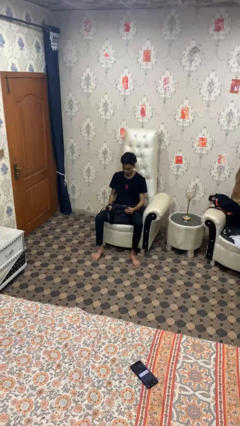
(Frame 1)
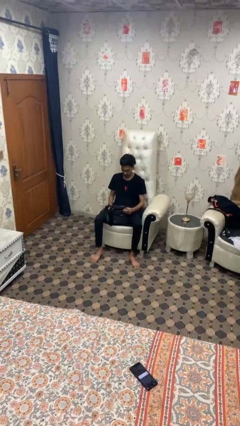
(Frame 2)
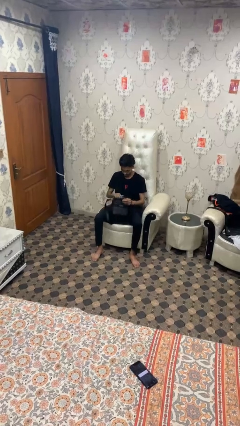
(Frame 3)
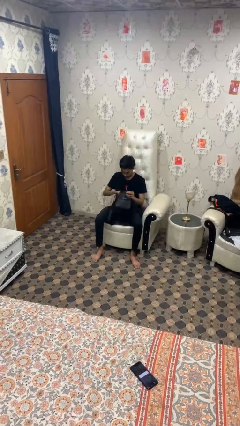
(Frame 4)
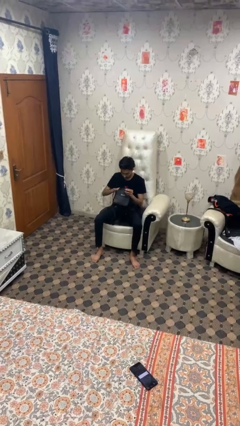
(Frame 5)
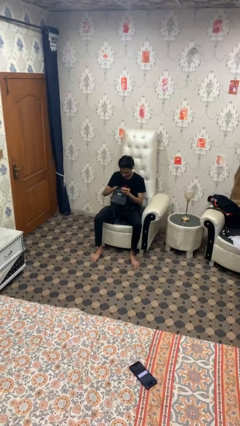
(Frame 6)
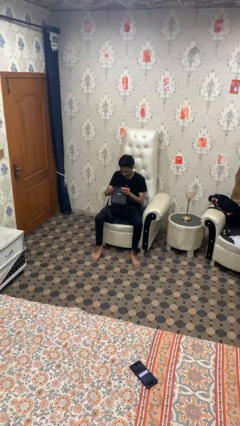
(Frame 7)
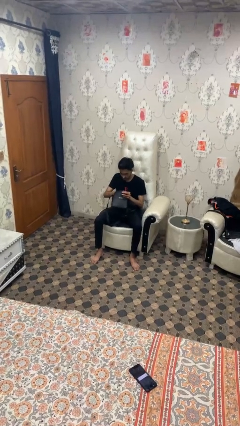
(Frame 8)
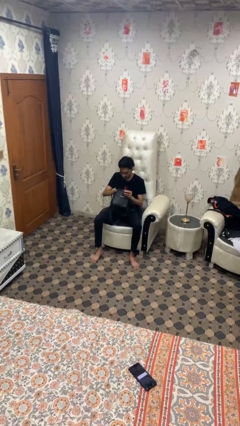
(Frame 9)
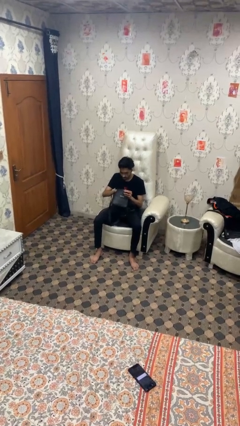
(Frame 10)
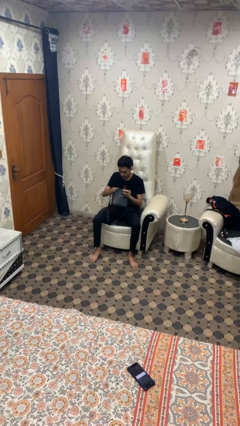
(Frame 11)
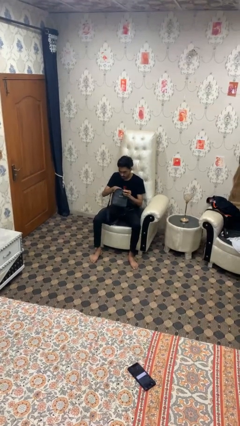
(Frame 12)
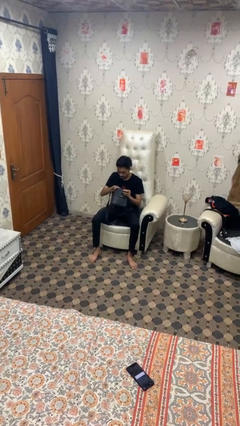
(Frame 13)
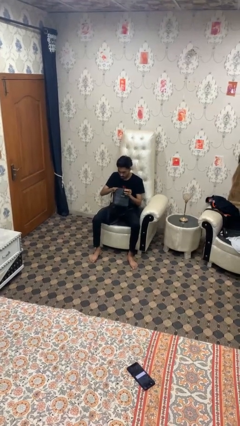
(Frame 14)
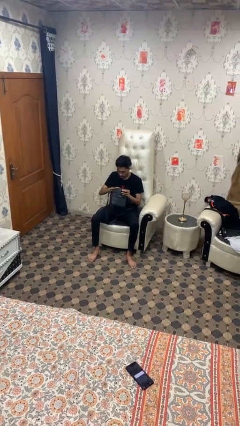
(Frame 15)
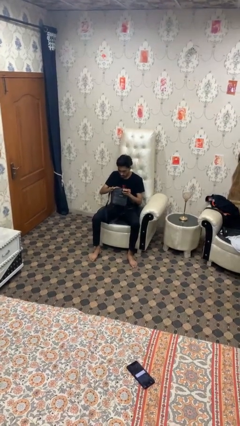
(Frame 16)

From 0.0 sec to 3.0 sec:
person searches in bag

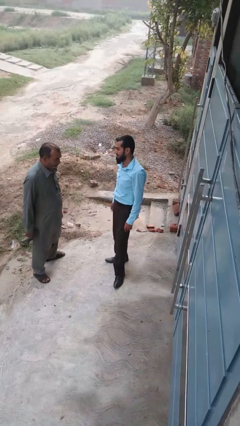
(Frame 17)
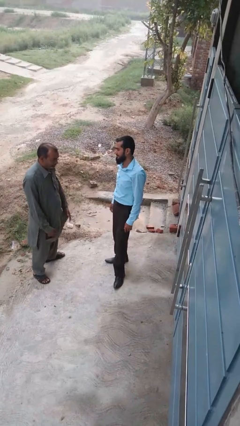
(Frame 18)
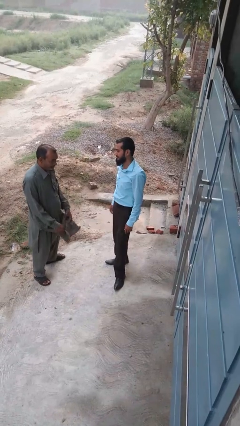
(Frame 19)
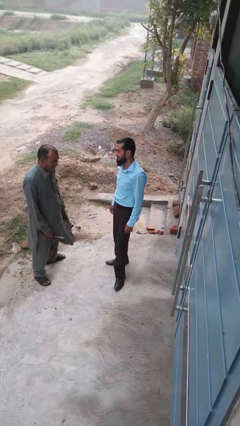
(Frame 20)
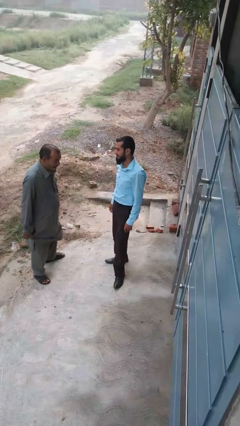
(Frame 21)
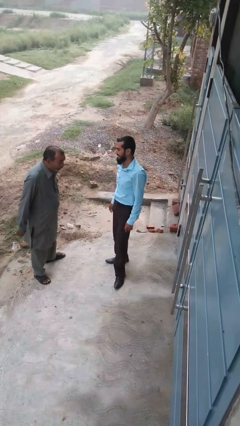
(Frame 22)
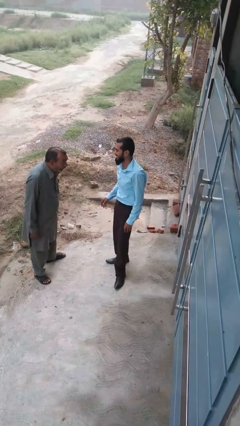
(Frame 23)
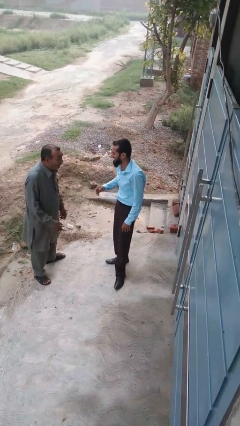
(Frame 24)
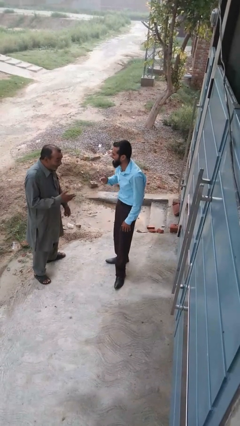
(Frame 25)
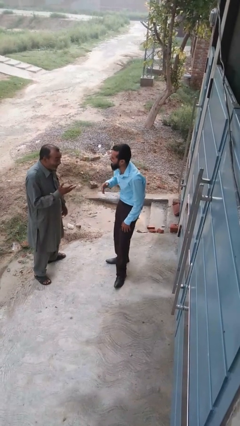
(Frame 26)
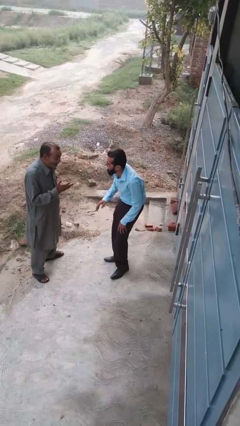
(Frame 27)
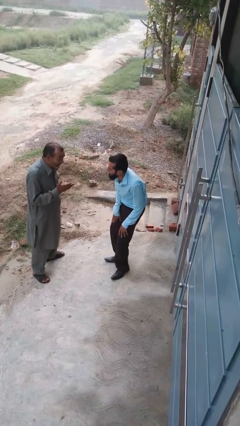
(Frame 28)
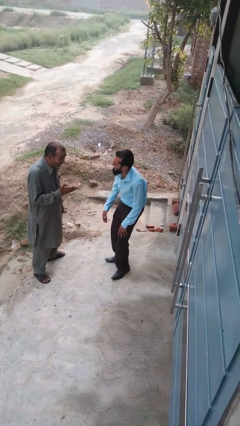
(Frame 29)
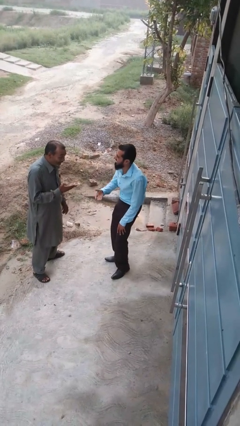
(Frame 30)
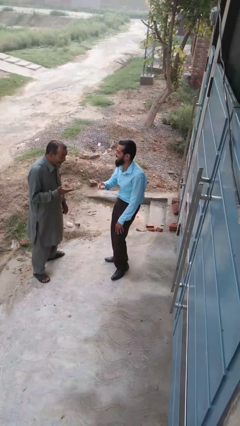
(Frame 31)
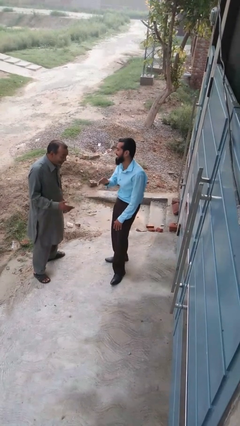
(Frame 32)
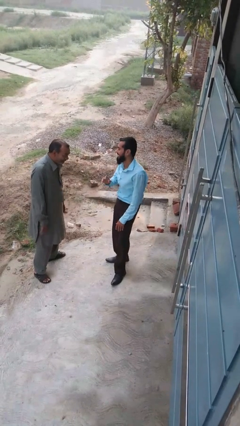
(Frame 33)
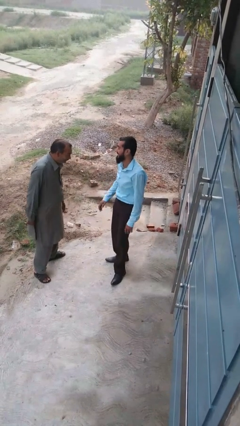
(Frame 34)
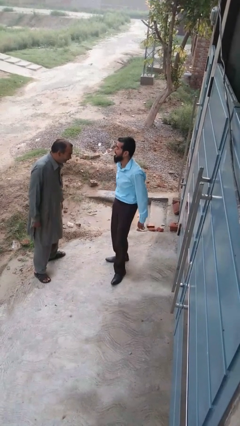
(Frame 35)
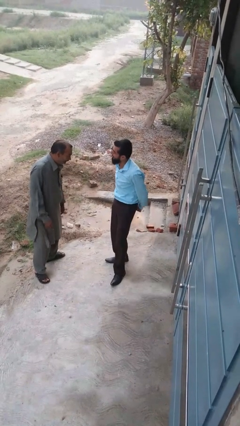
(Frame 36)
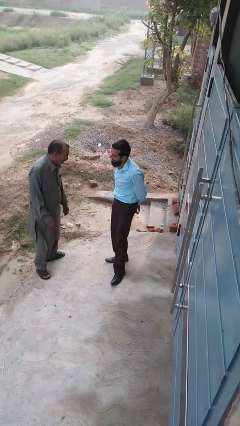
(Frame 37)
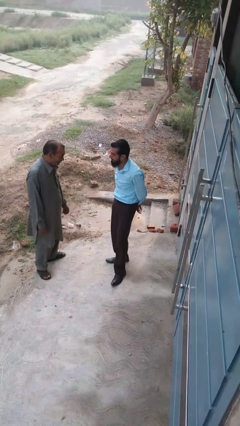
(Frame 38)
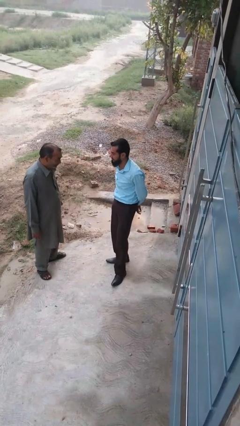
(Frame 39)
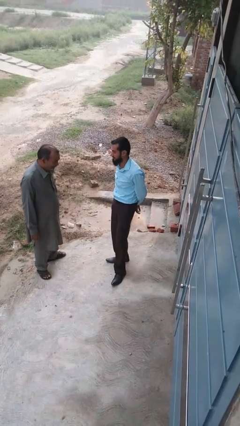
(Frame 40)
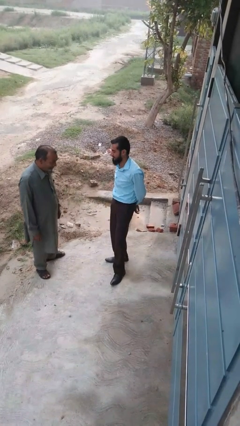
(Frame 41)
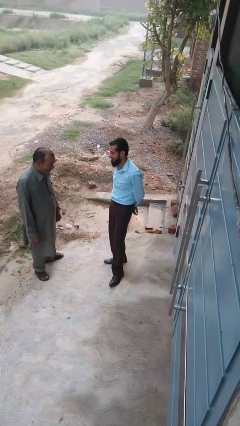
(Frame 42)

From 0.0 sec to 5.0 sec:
person laughs with person

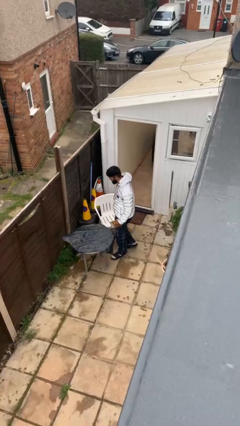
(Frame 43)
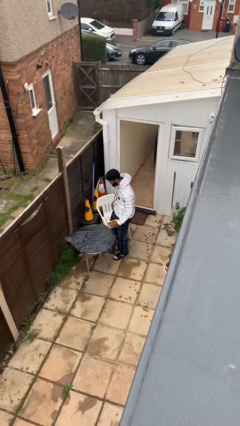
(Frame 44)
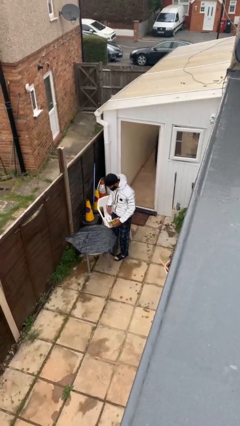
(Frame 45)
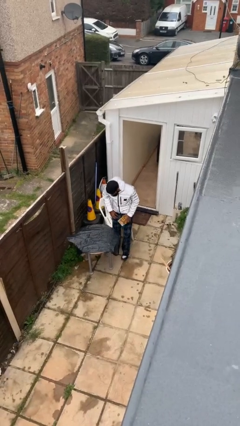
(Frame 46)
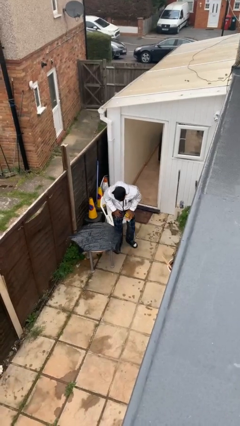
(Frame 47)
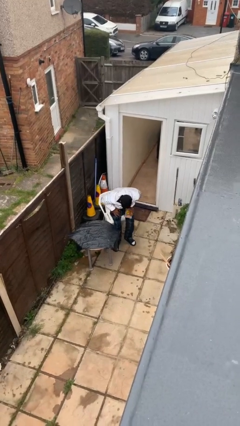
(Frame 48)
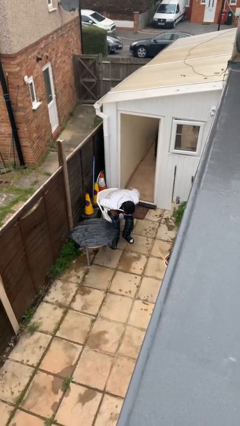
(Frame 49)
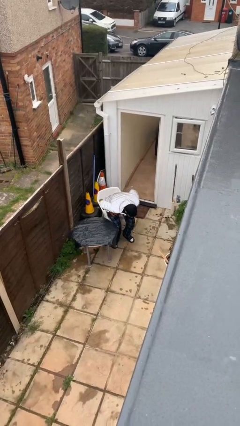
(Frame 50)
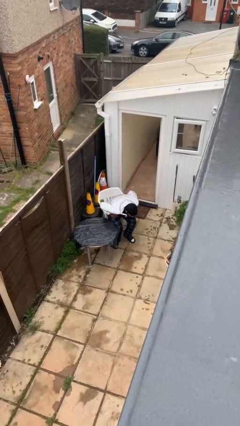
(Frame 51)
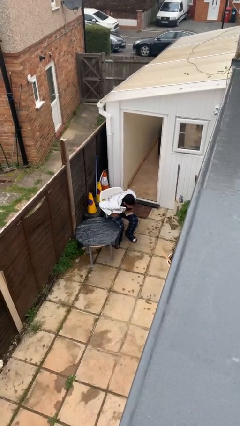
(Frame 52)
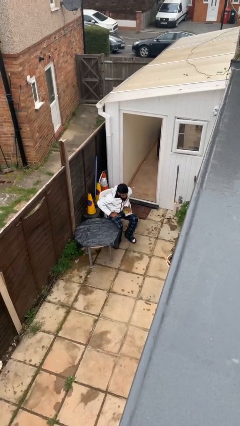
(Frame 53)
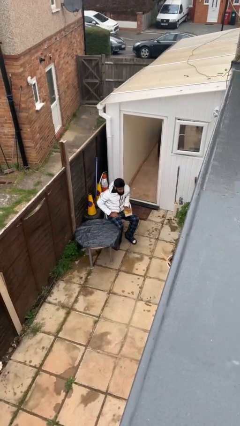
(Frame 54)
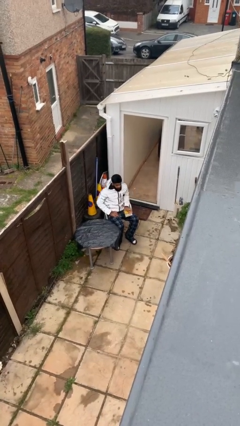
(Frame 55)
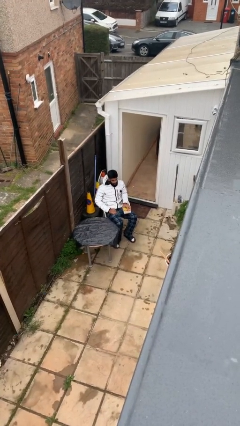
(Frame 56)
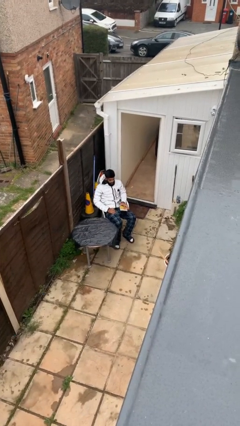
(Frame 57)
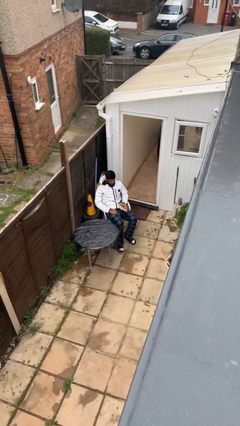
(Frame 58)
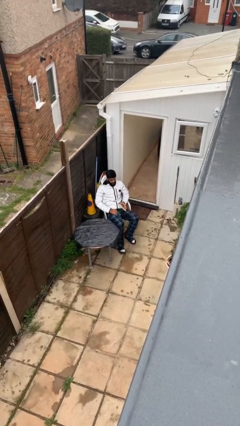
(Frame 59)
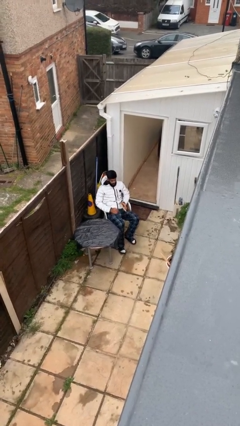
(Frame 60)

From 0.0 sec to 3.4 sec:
person sits down

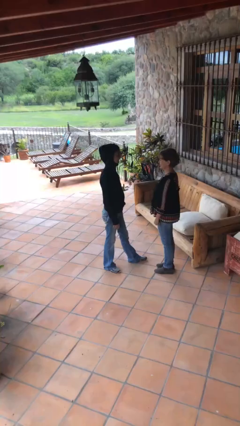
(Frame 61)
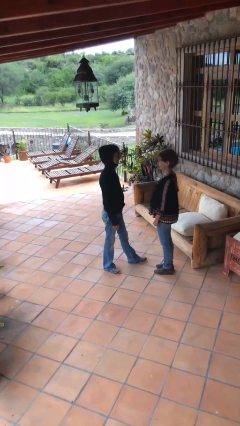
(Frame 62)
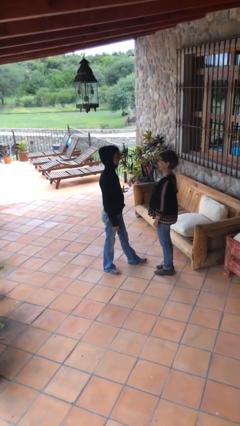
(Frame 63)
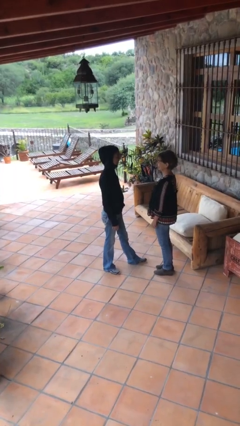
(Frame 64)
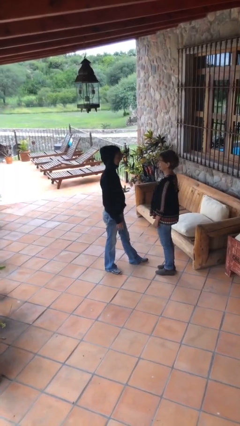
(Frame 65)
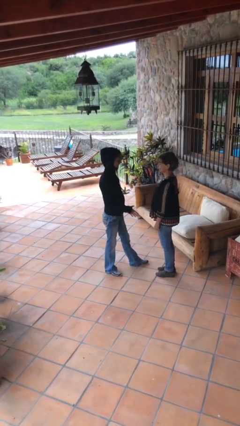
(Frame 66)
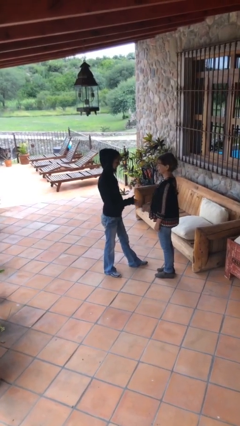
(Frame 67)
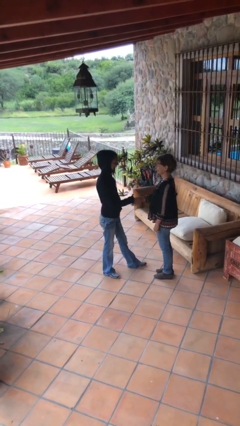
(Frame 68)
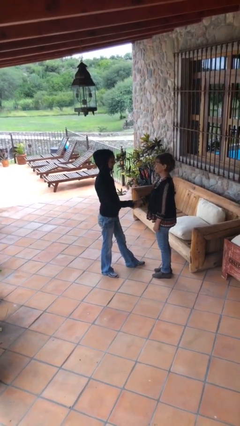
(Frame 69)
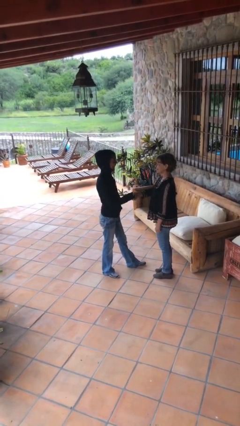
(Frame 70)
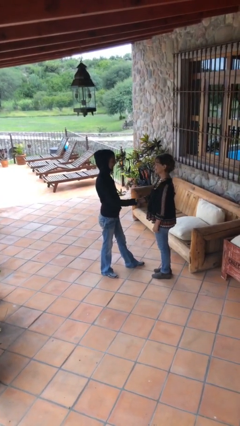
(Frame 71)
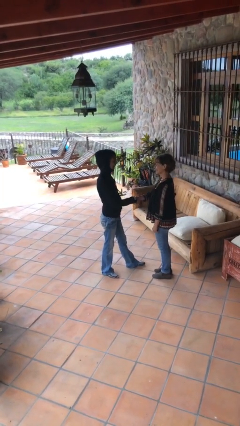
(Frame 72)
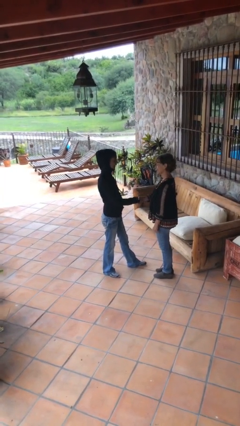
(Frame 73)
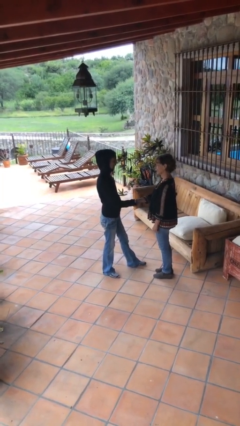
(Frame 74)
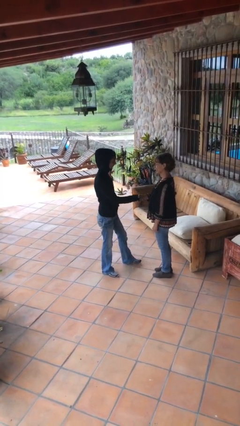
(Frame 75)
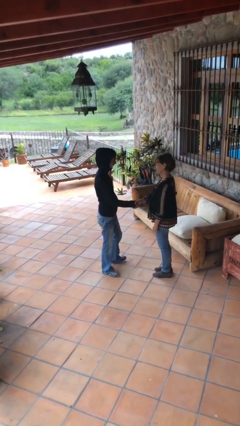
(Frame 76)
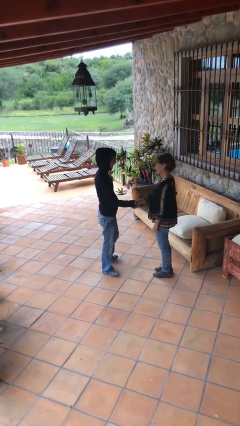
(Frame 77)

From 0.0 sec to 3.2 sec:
person shakes hand

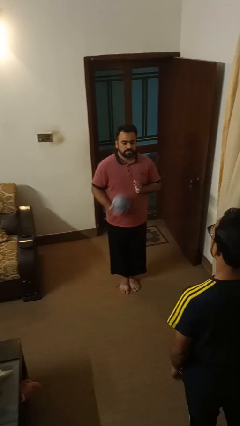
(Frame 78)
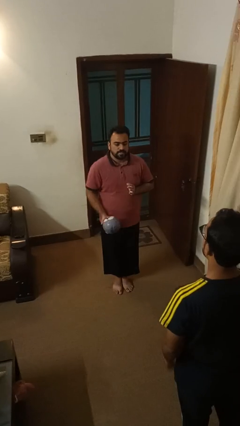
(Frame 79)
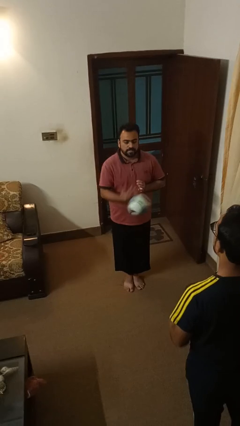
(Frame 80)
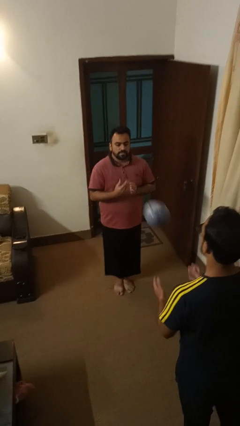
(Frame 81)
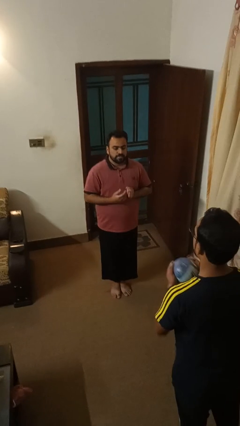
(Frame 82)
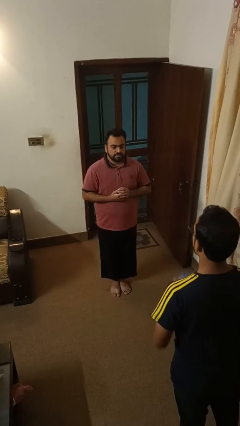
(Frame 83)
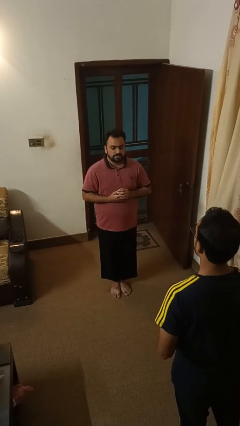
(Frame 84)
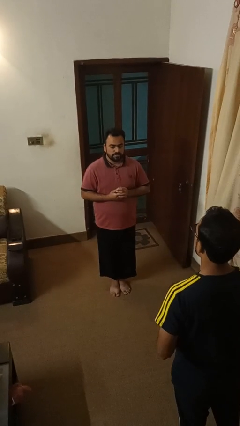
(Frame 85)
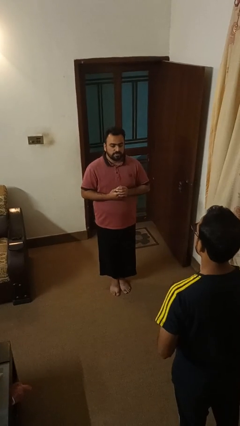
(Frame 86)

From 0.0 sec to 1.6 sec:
person throws object to person

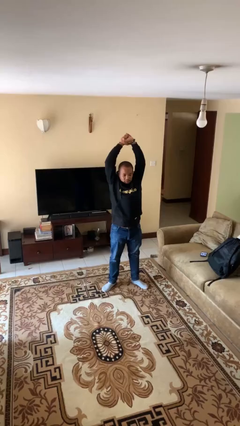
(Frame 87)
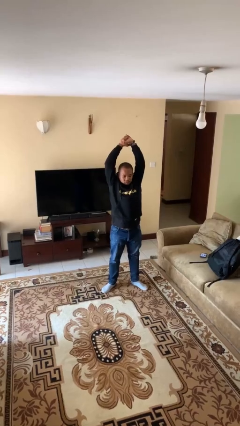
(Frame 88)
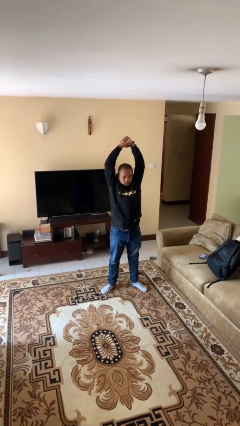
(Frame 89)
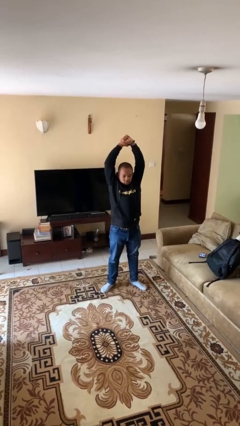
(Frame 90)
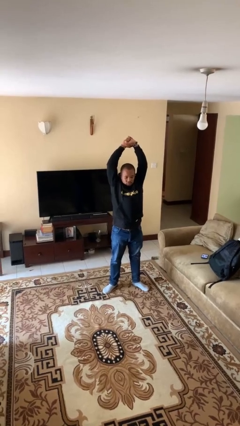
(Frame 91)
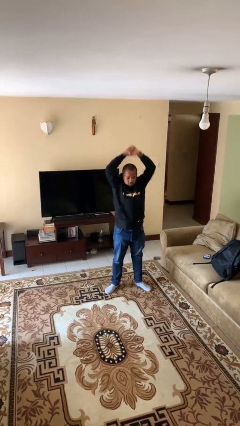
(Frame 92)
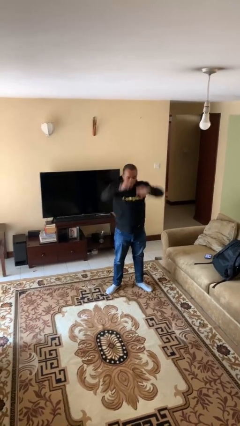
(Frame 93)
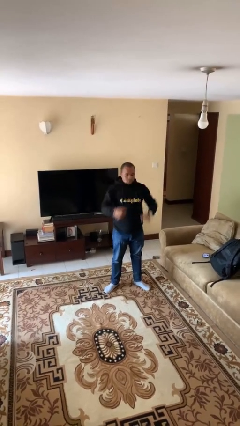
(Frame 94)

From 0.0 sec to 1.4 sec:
person stretches arms over head

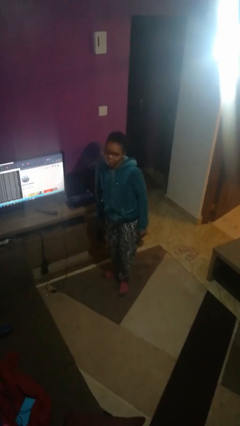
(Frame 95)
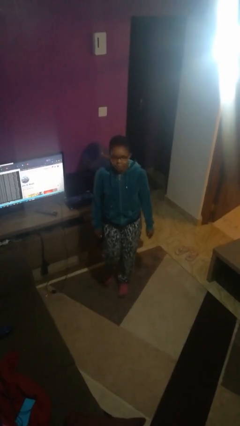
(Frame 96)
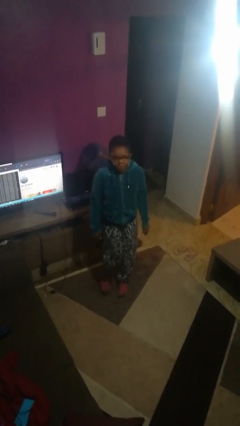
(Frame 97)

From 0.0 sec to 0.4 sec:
person wiggles hips
